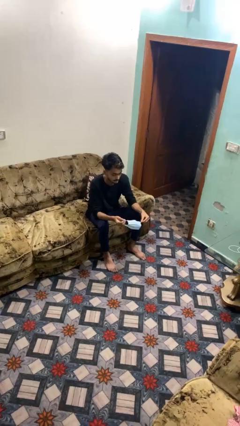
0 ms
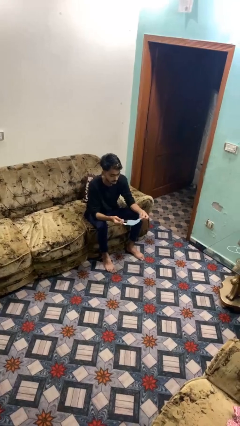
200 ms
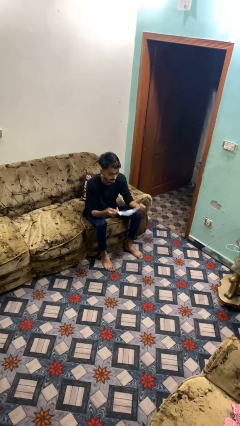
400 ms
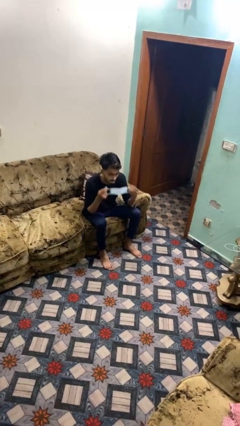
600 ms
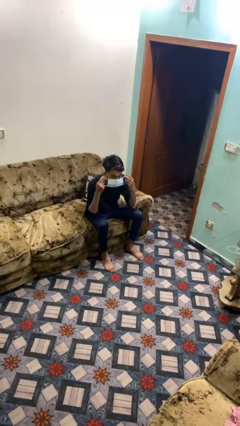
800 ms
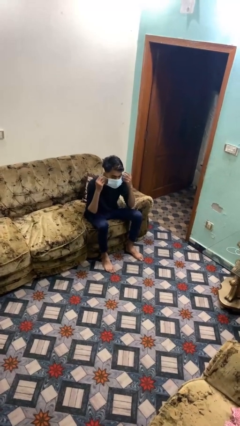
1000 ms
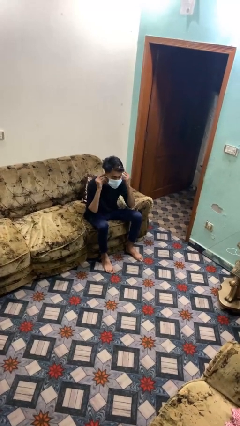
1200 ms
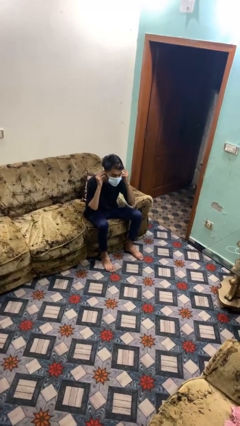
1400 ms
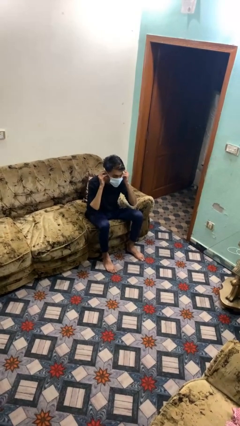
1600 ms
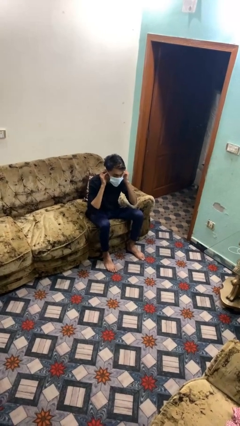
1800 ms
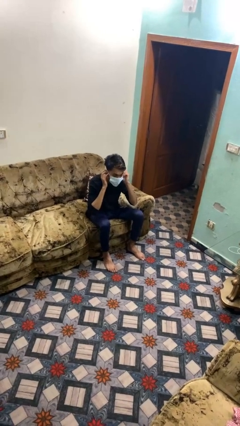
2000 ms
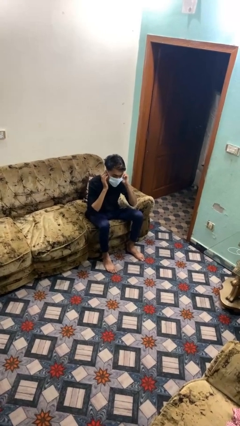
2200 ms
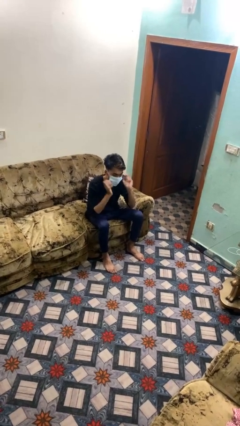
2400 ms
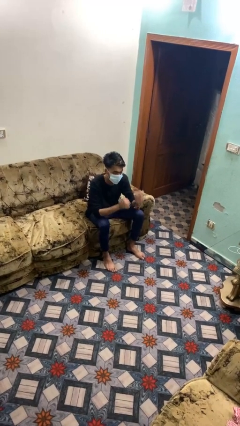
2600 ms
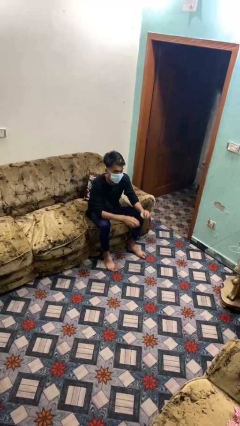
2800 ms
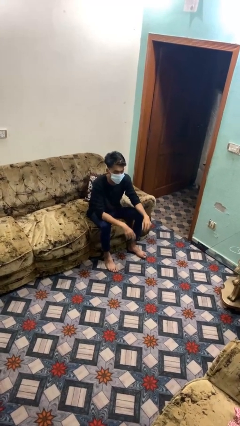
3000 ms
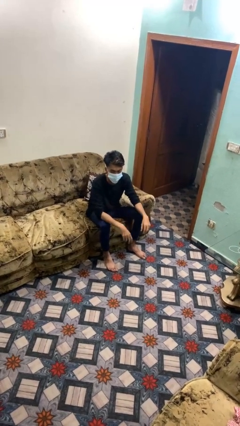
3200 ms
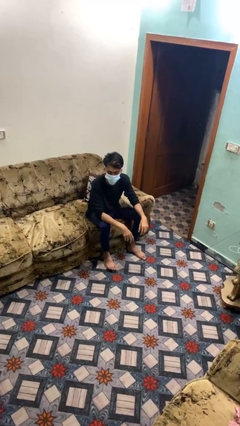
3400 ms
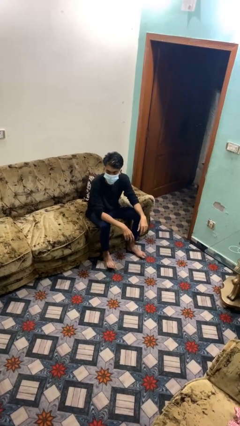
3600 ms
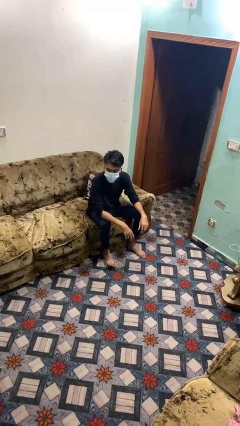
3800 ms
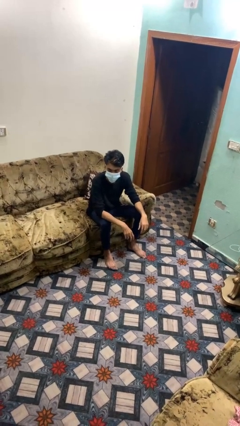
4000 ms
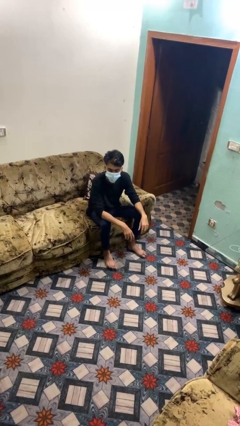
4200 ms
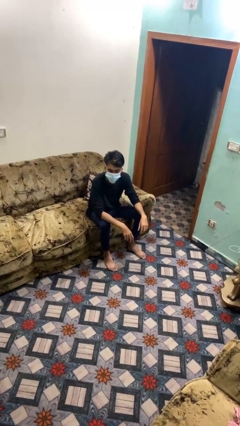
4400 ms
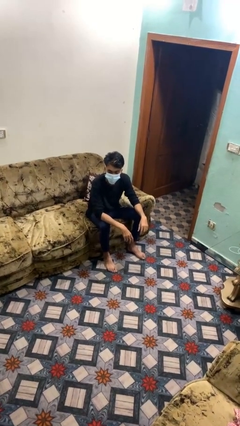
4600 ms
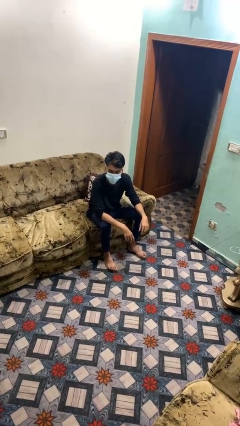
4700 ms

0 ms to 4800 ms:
person puts on facemask

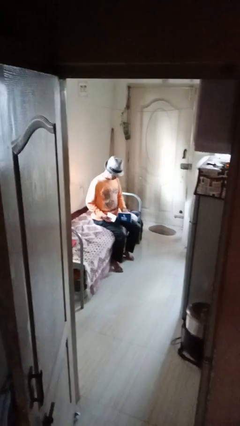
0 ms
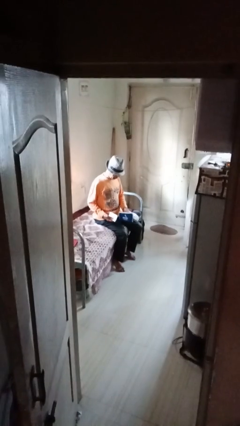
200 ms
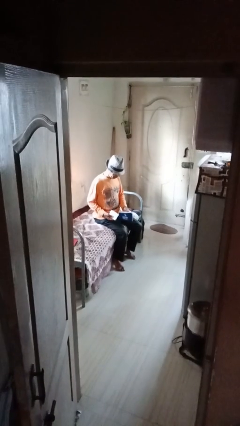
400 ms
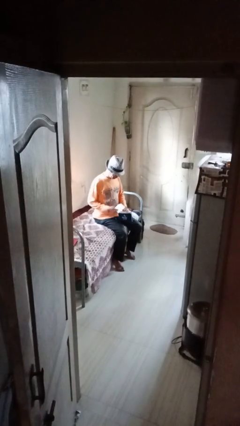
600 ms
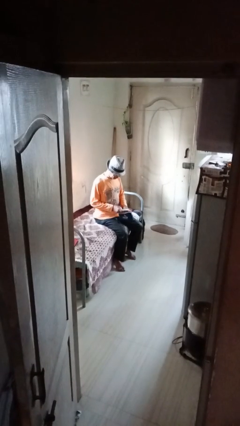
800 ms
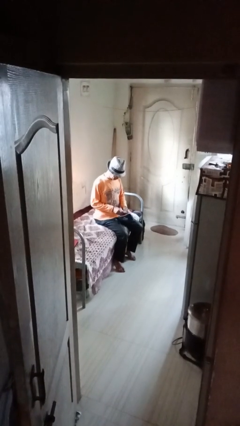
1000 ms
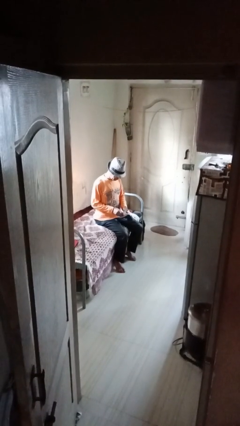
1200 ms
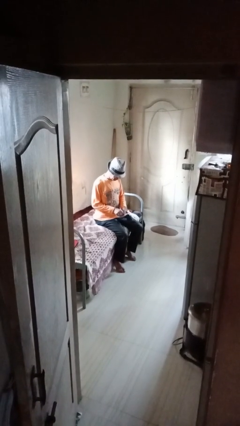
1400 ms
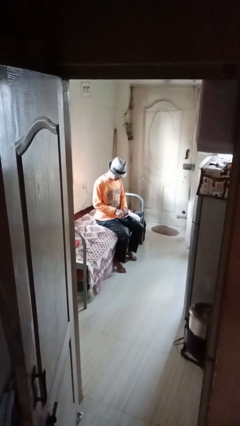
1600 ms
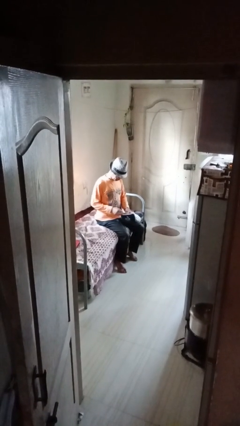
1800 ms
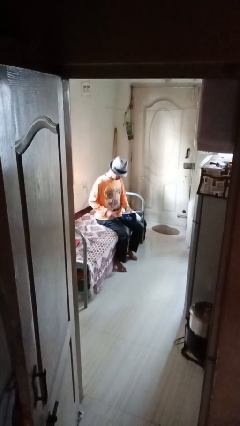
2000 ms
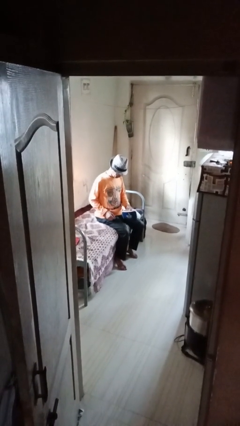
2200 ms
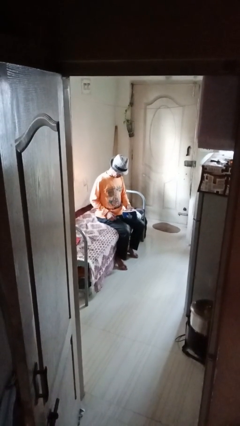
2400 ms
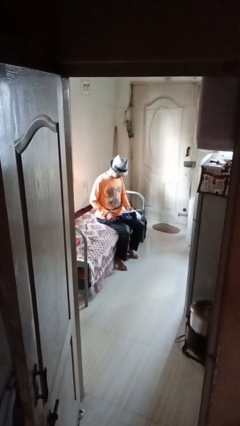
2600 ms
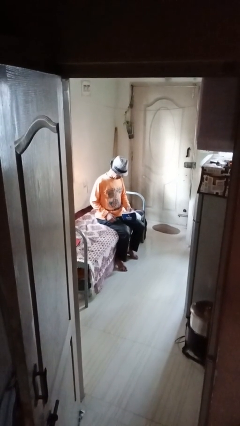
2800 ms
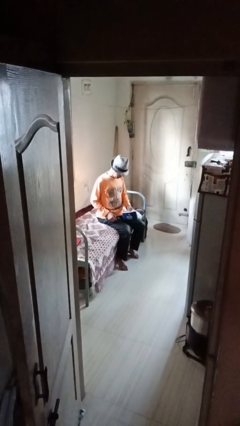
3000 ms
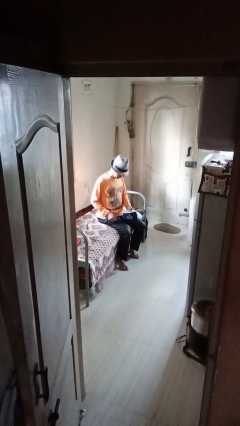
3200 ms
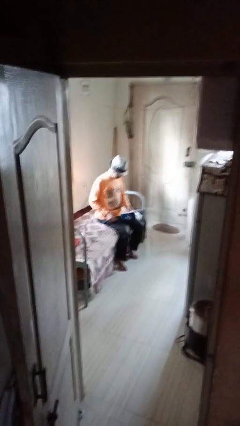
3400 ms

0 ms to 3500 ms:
person puts object into purse

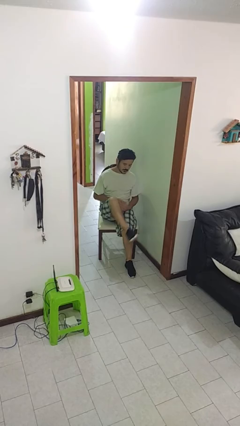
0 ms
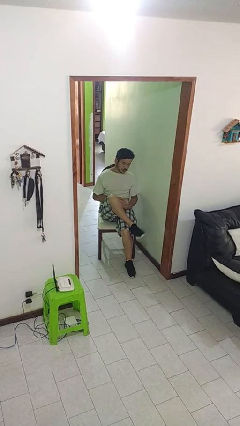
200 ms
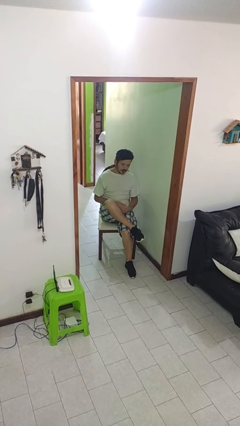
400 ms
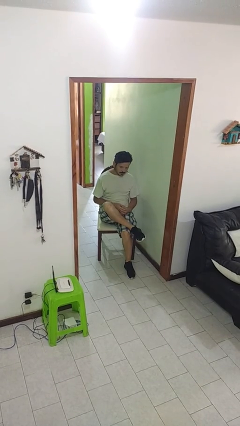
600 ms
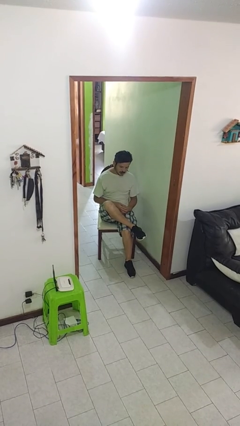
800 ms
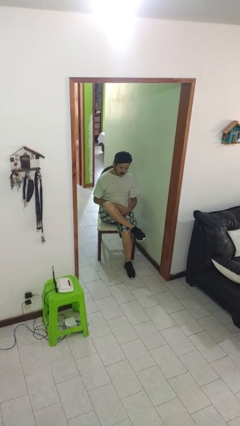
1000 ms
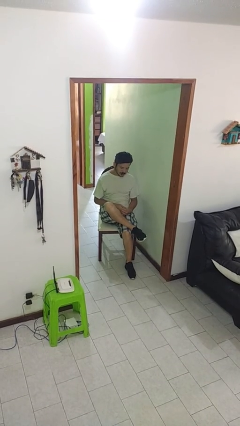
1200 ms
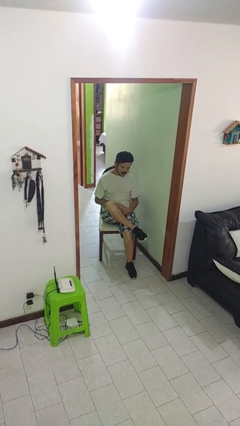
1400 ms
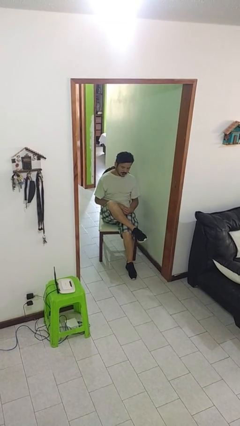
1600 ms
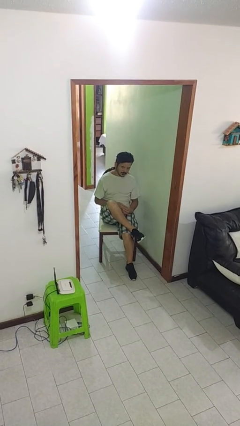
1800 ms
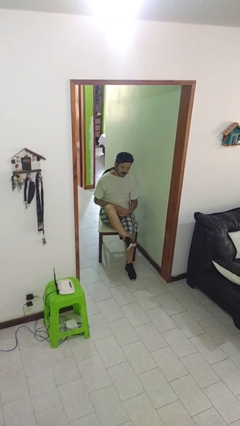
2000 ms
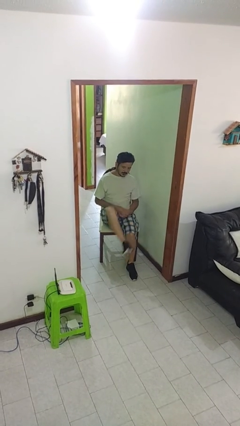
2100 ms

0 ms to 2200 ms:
person crosses legs

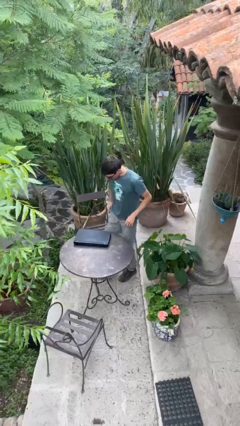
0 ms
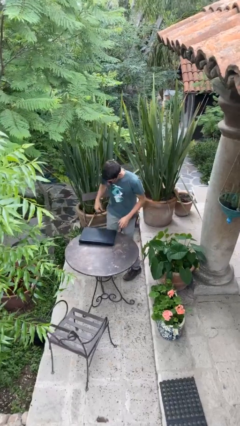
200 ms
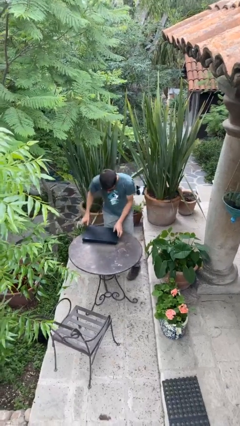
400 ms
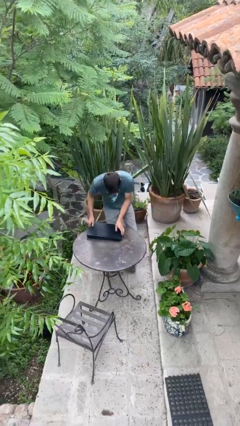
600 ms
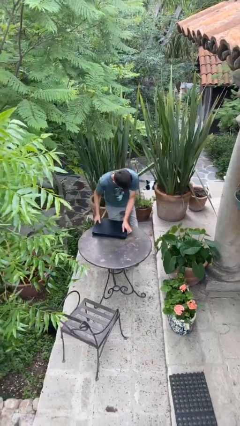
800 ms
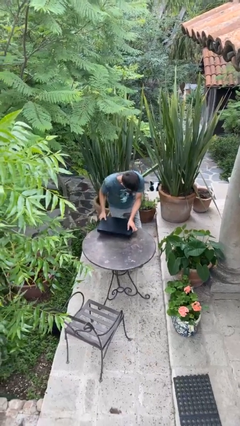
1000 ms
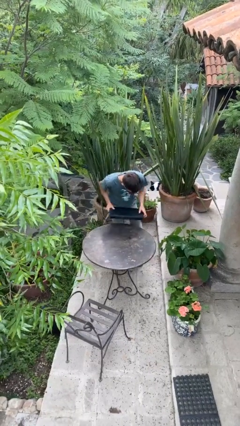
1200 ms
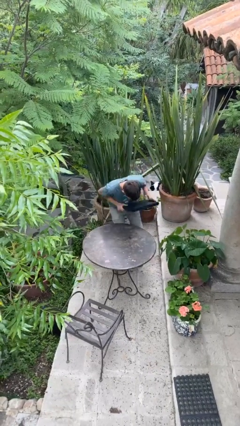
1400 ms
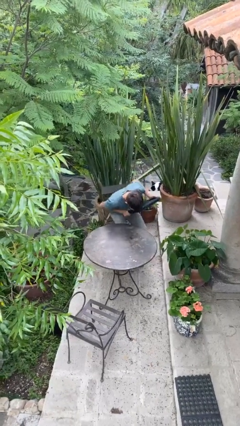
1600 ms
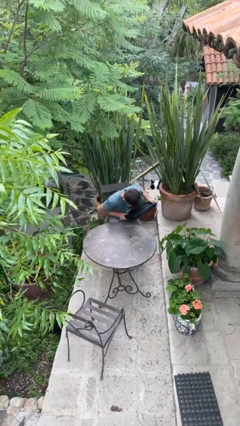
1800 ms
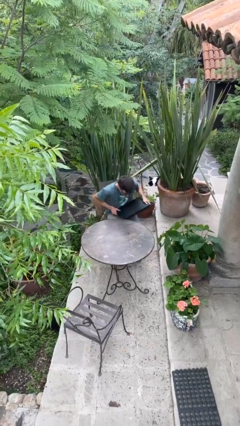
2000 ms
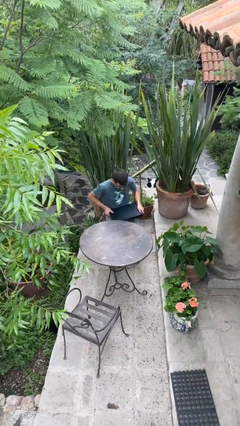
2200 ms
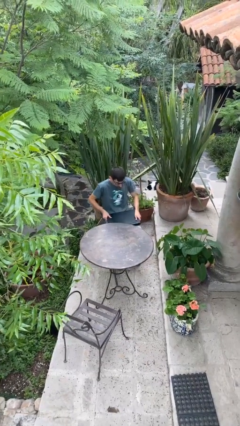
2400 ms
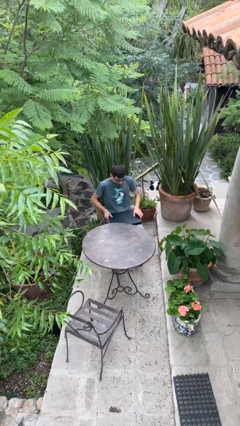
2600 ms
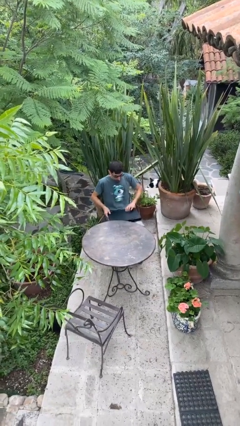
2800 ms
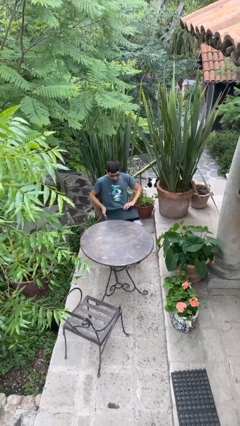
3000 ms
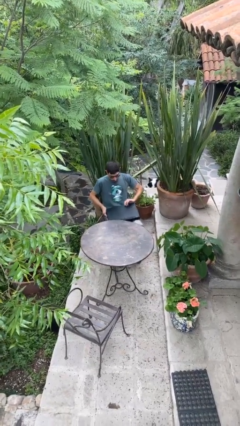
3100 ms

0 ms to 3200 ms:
person sits down

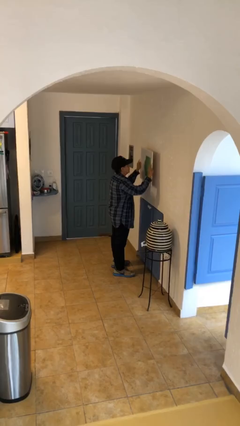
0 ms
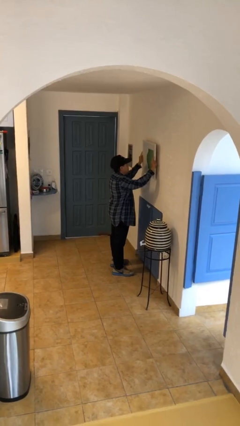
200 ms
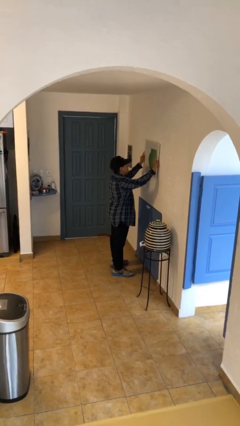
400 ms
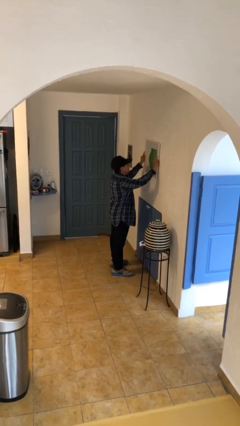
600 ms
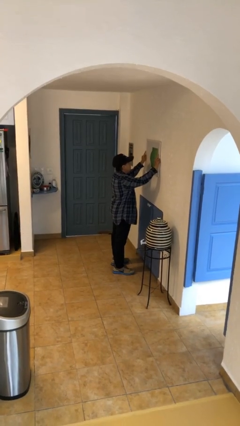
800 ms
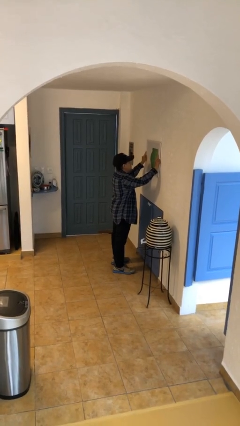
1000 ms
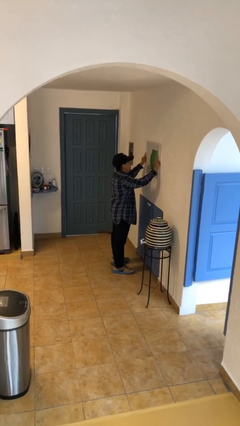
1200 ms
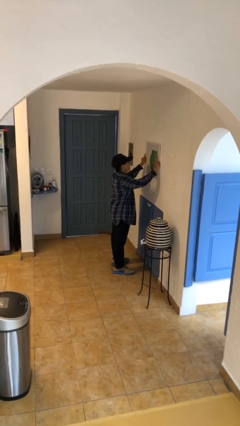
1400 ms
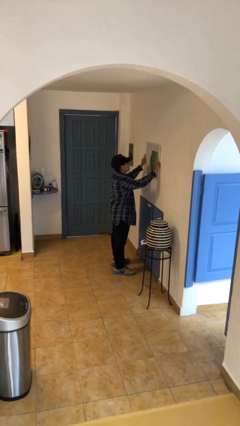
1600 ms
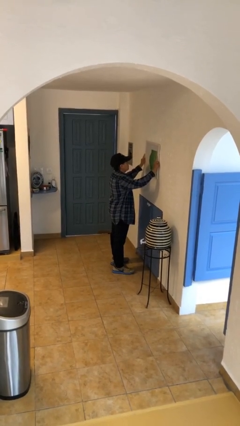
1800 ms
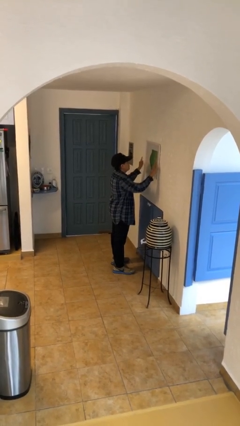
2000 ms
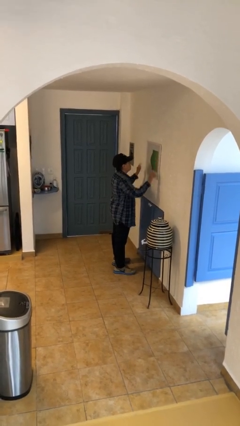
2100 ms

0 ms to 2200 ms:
person puts up picture frame

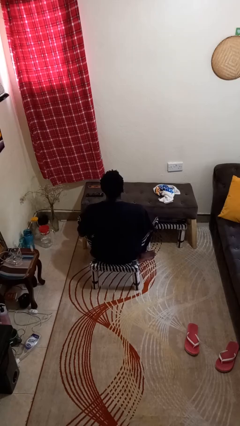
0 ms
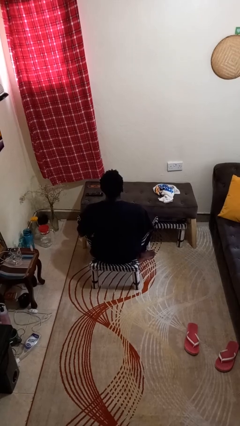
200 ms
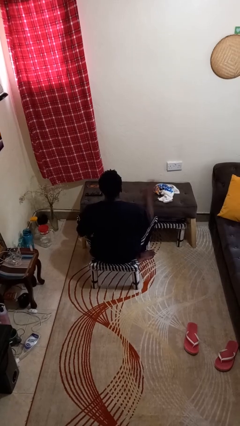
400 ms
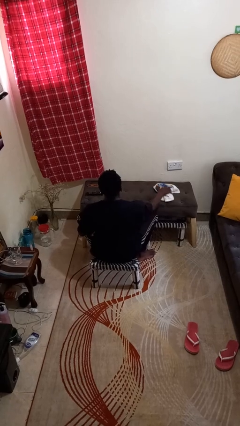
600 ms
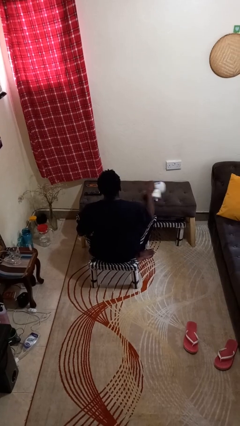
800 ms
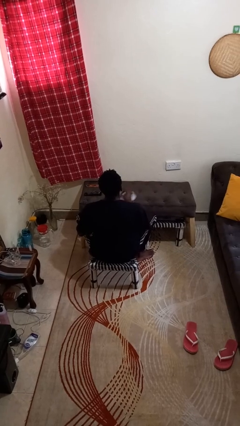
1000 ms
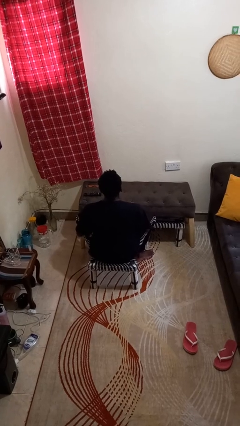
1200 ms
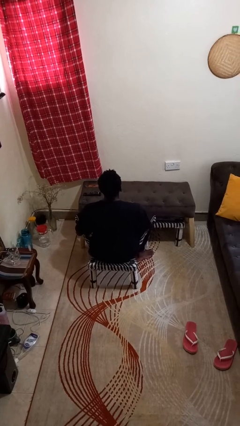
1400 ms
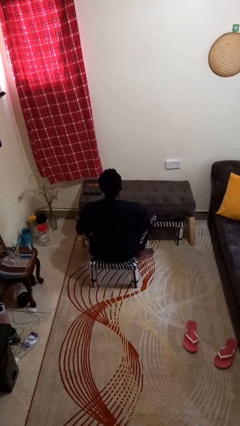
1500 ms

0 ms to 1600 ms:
person picks up object from table

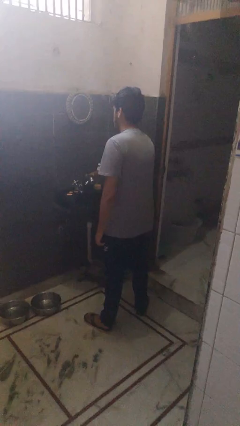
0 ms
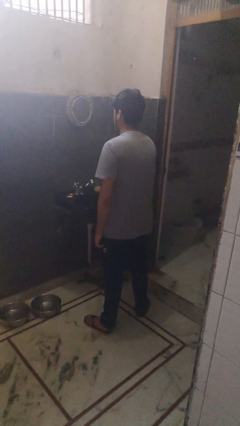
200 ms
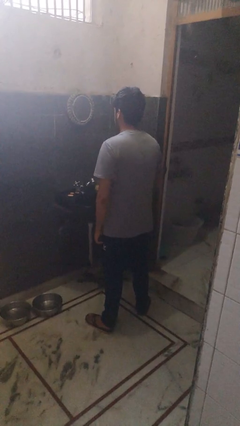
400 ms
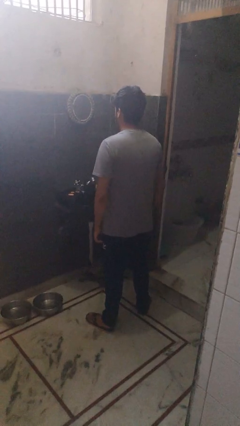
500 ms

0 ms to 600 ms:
person turns off faucet
